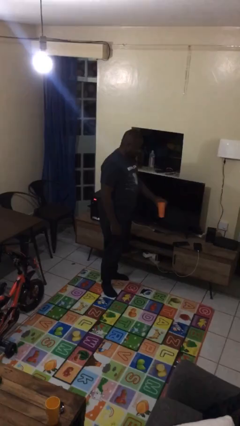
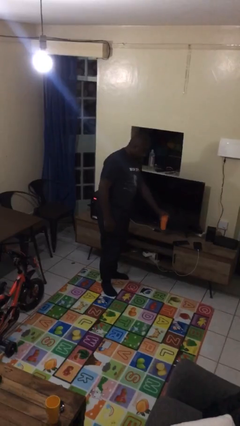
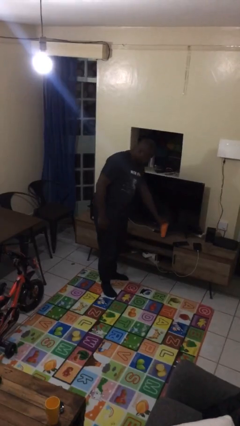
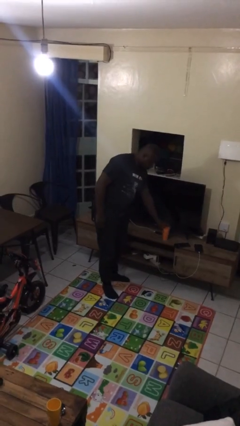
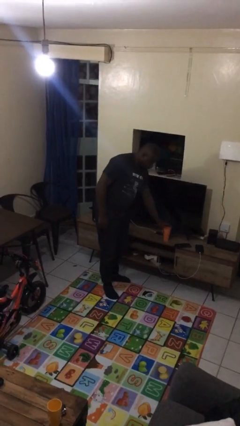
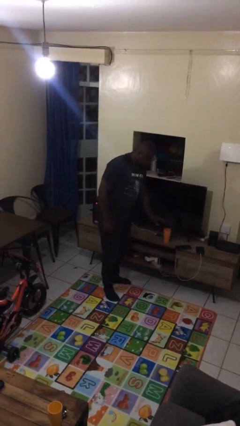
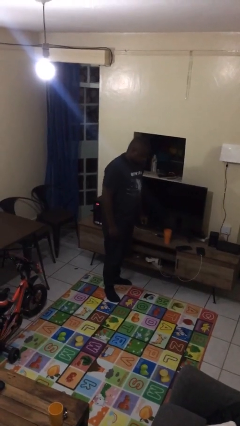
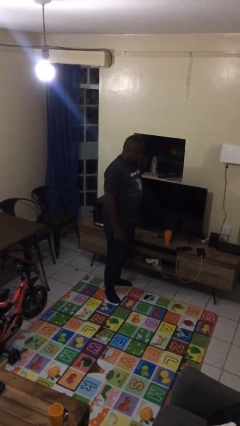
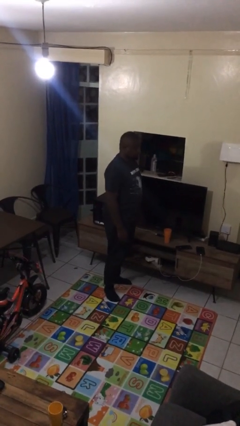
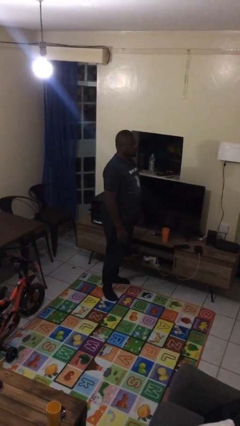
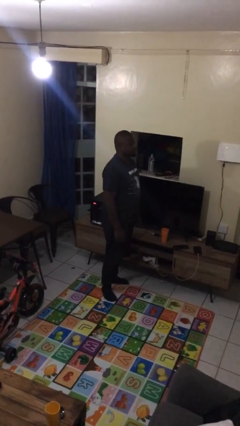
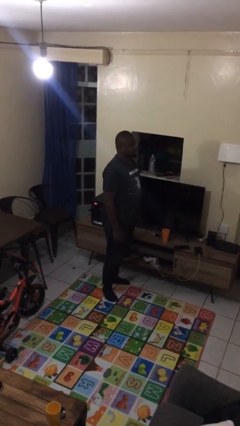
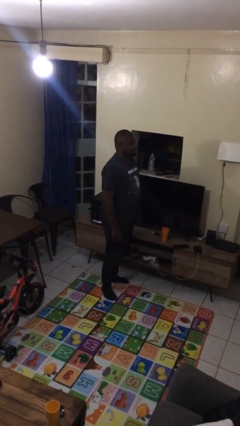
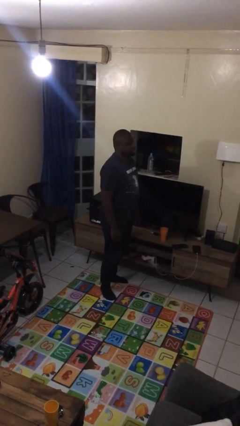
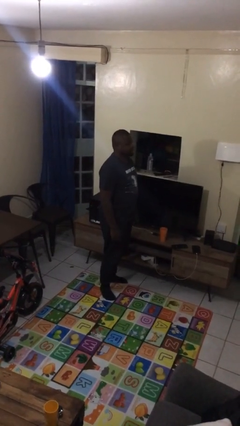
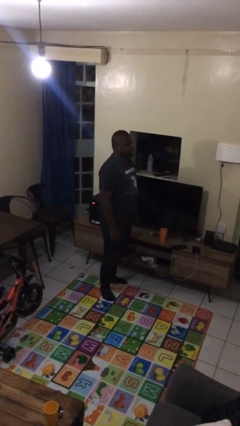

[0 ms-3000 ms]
person puts down object on countertop

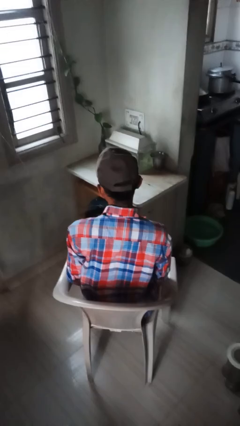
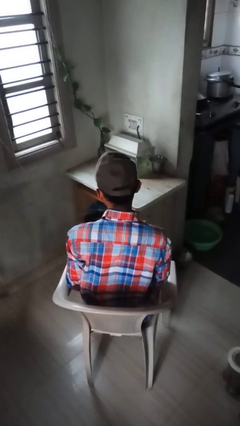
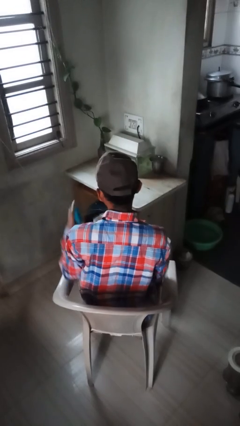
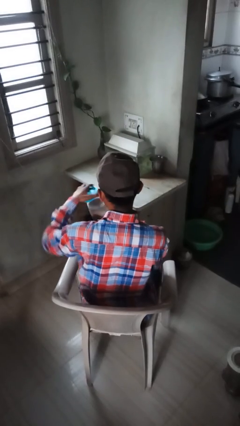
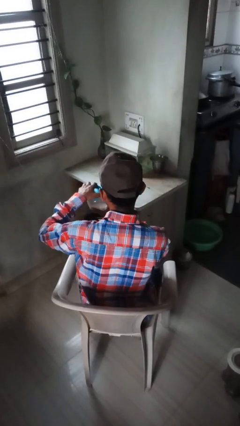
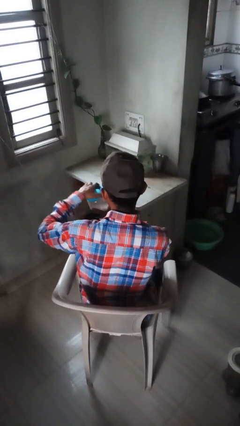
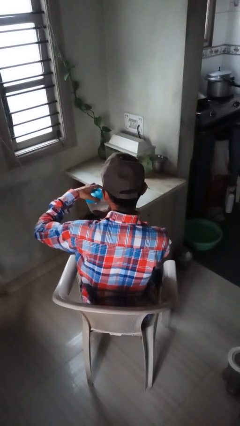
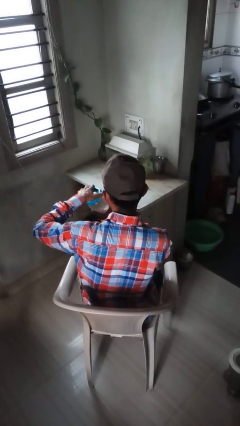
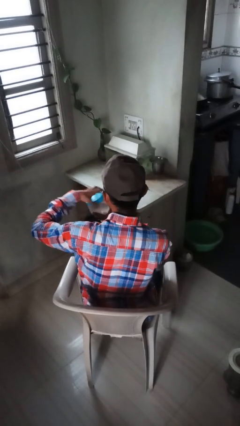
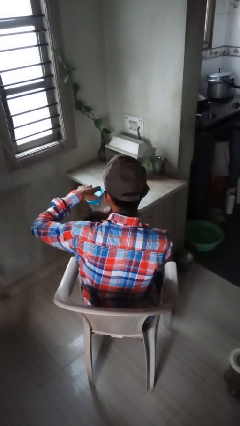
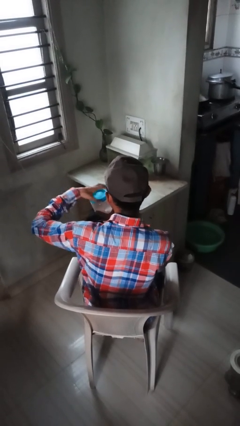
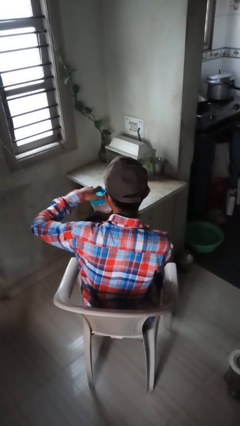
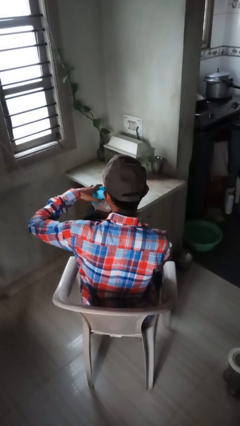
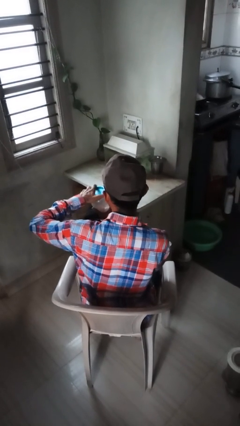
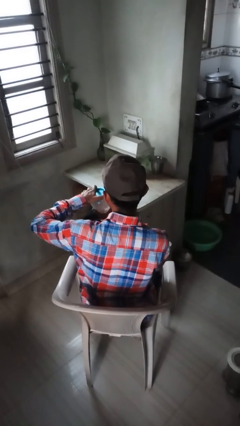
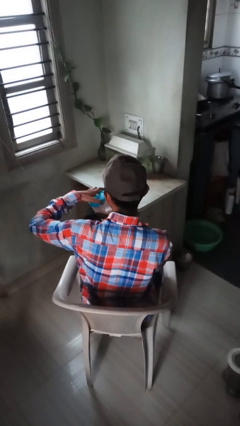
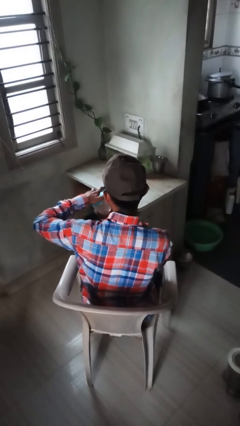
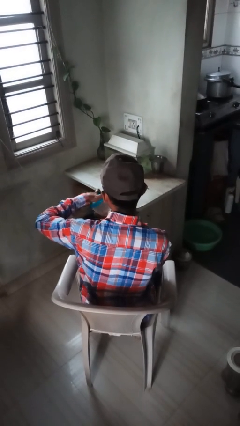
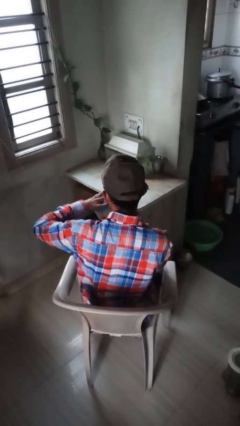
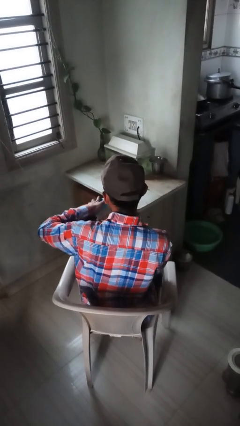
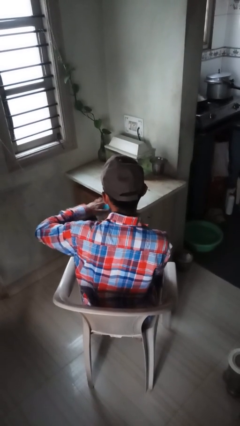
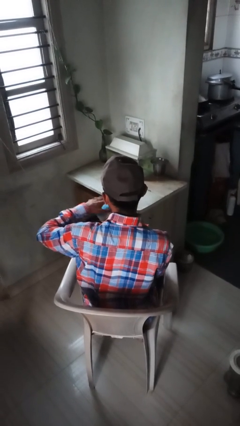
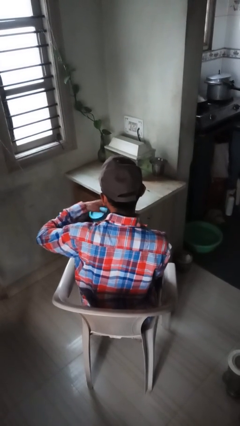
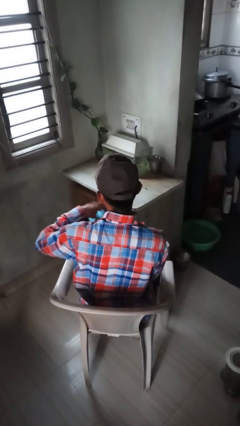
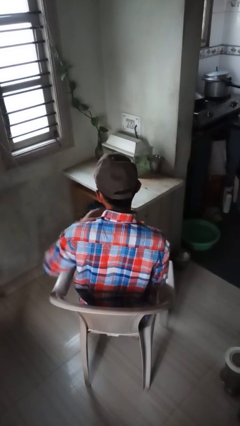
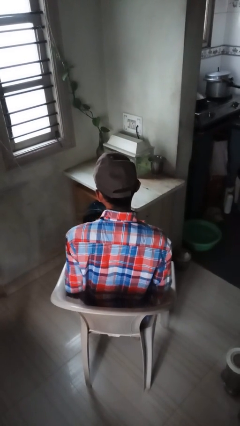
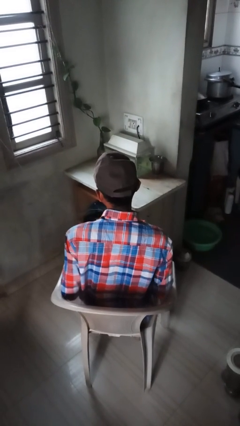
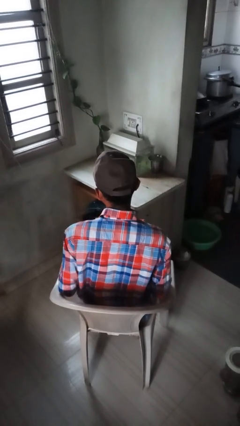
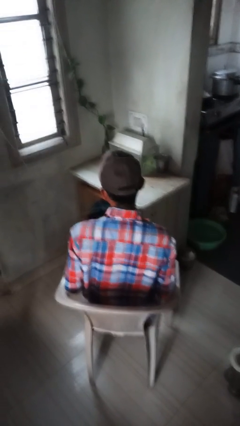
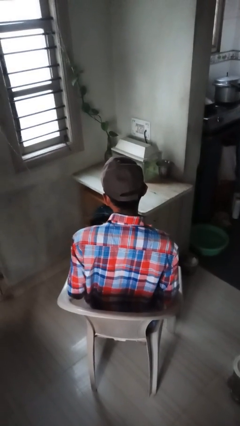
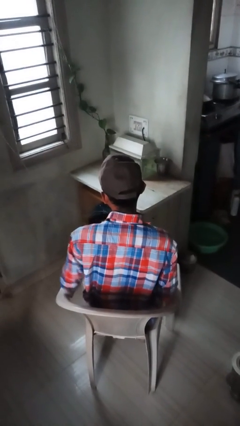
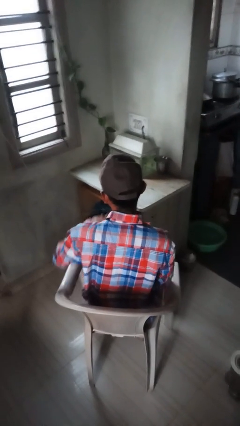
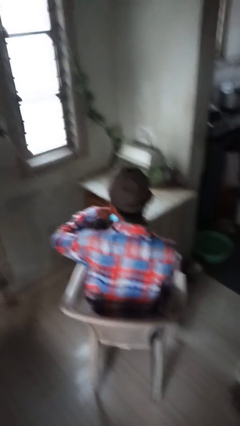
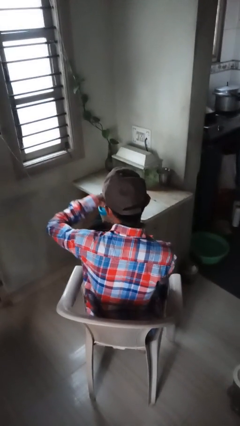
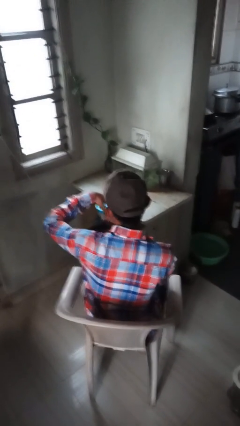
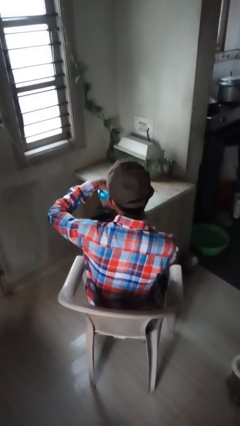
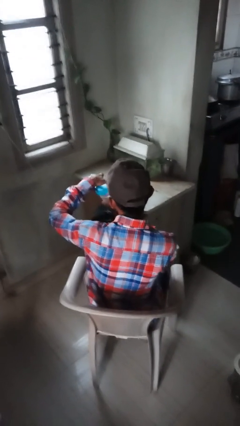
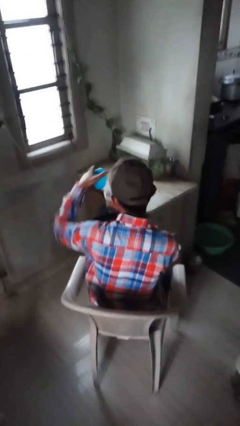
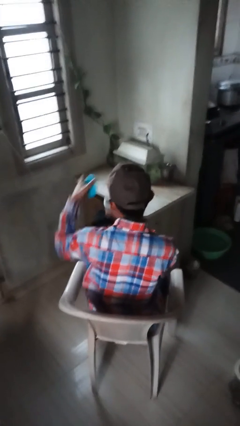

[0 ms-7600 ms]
person closes jar

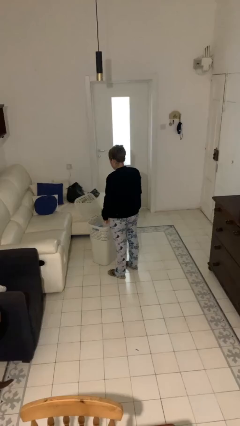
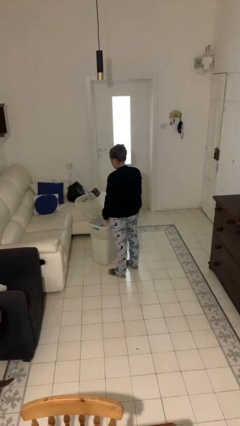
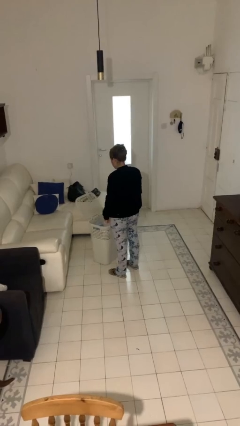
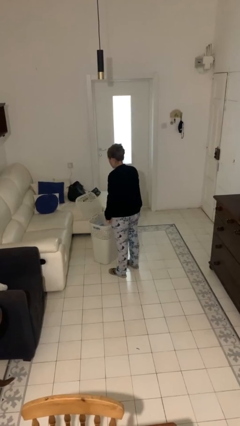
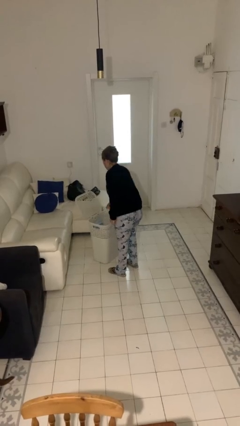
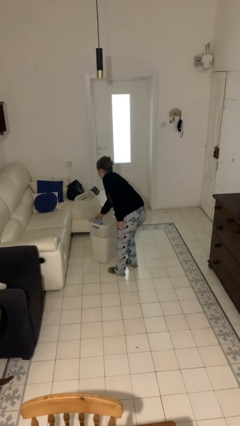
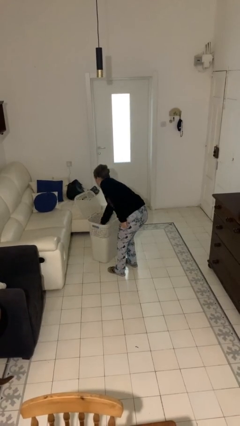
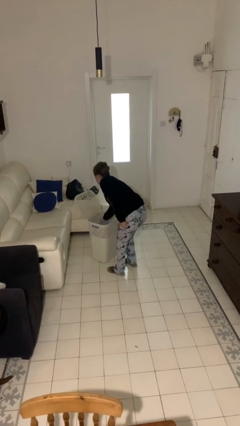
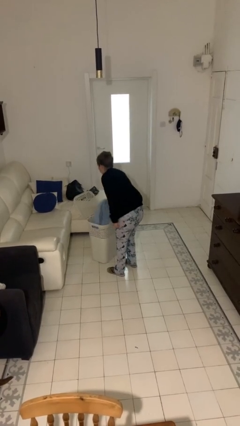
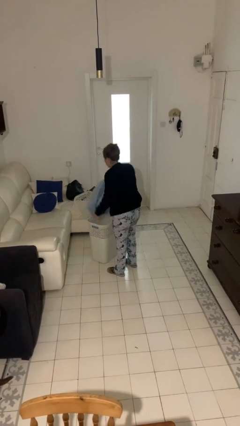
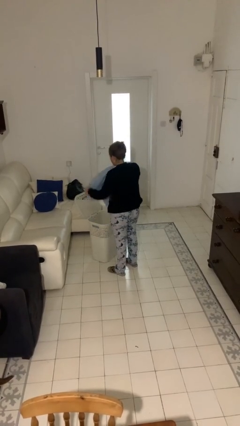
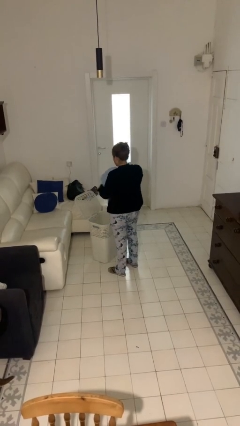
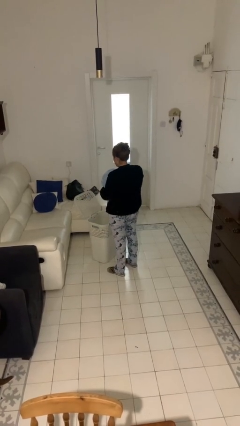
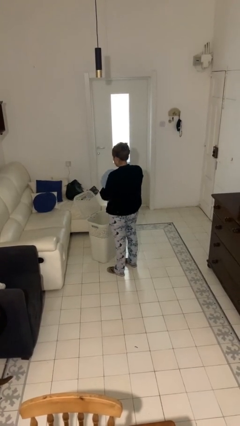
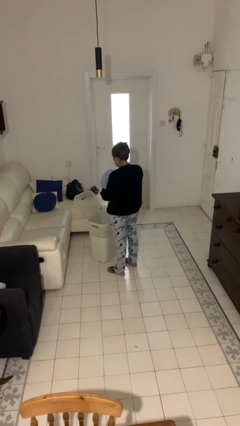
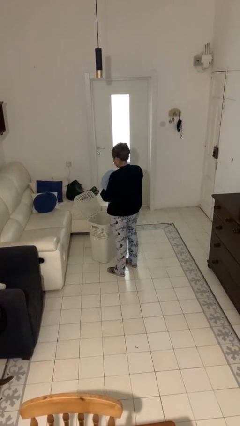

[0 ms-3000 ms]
person takes object from basket

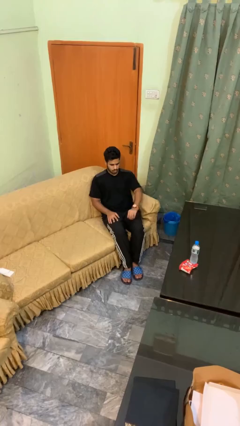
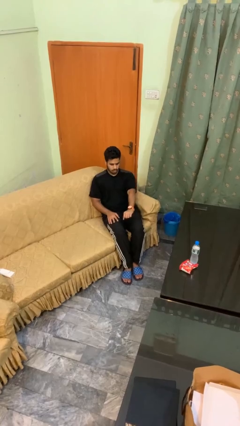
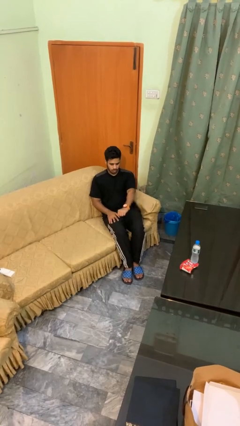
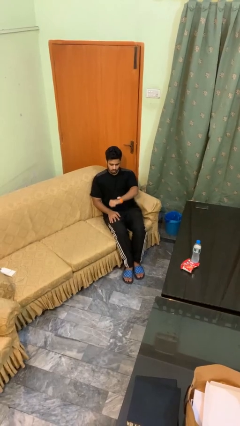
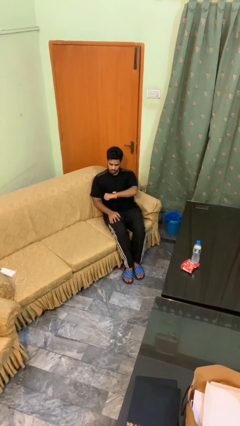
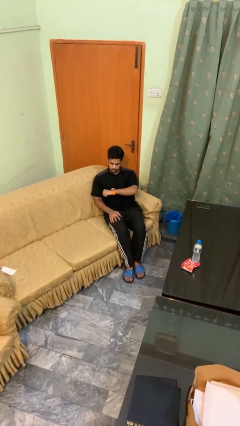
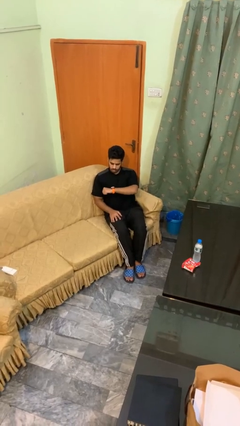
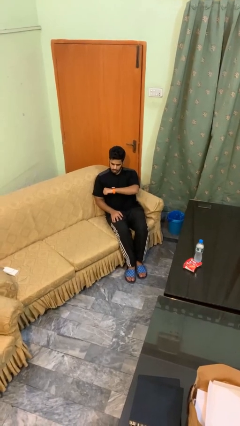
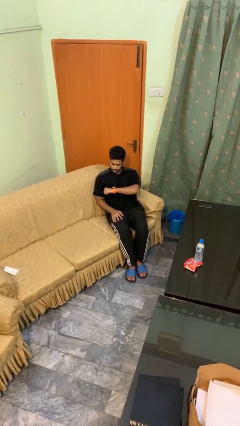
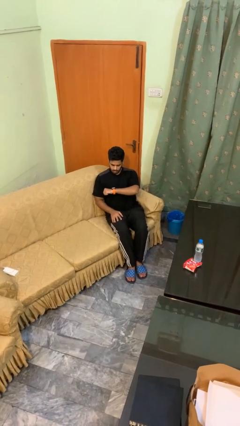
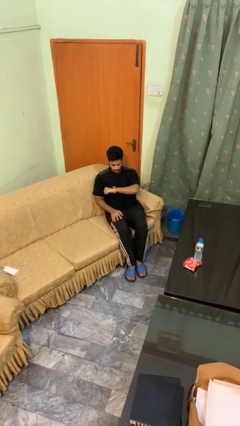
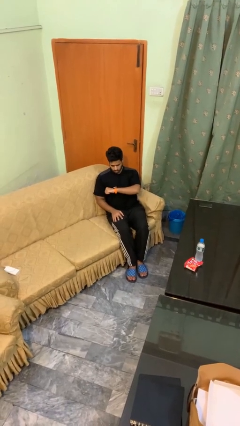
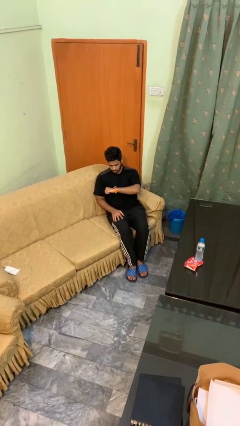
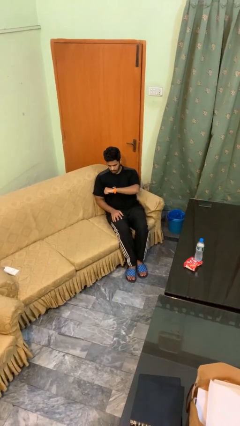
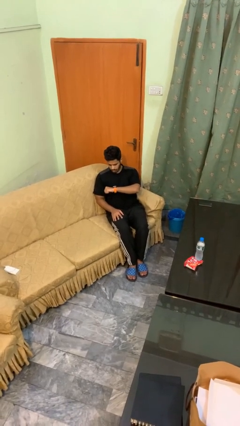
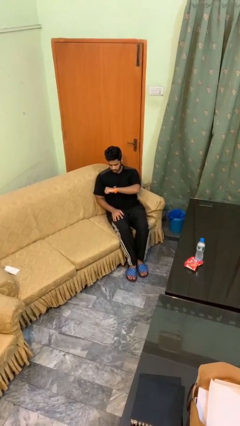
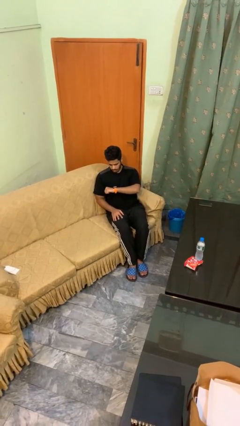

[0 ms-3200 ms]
person looks at wristwatch

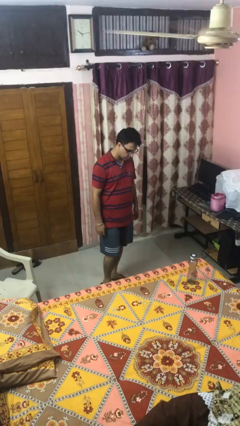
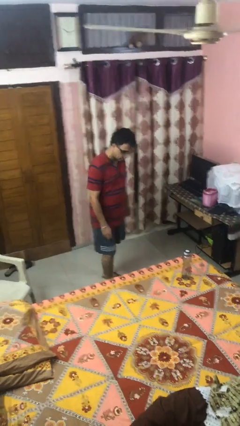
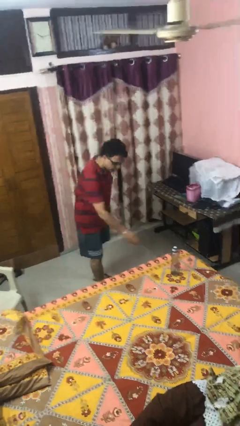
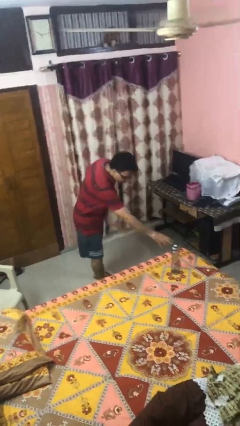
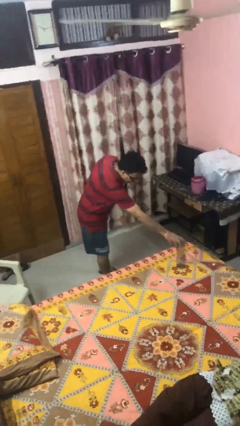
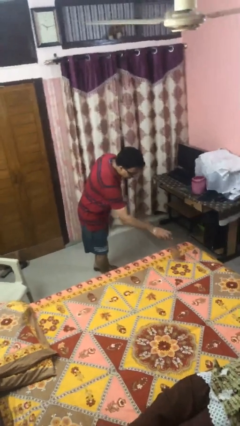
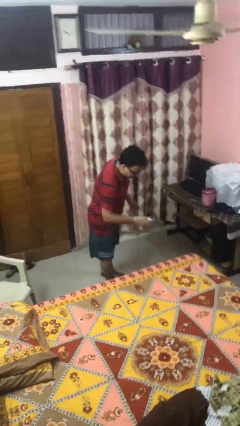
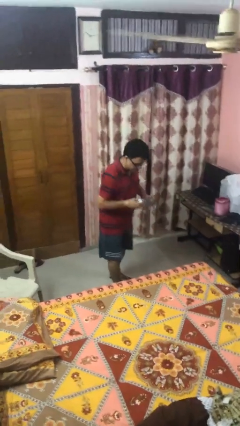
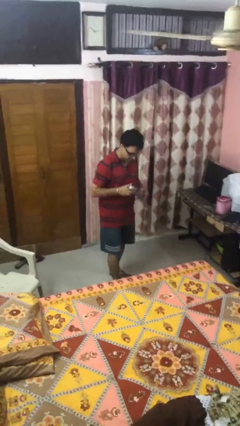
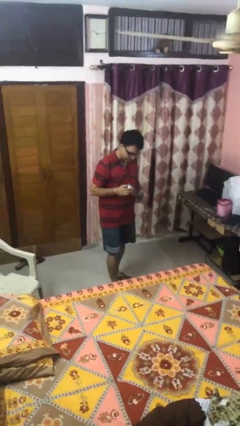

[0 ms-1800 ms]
person picks up object from bed
